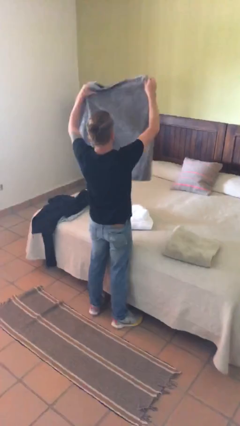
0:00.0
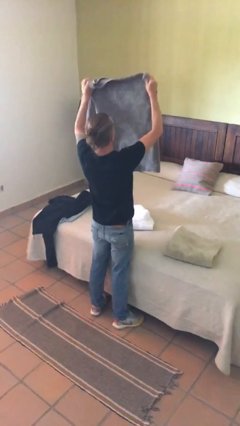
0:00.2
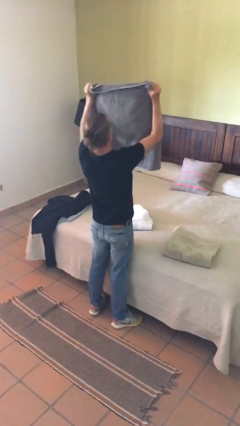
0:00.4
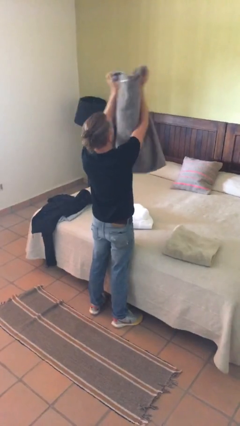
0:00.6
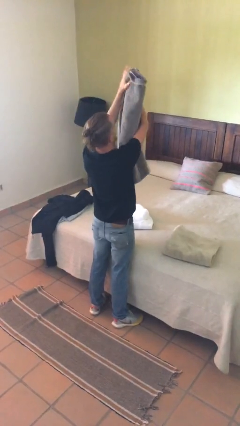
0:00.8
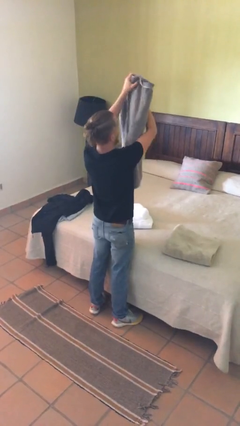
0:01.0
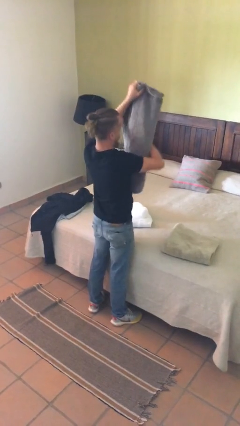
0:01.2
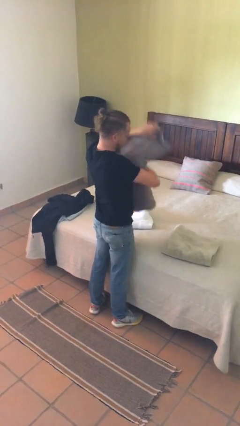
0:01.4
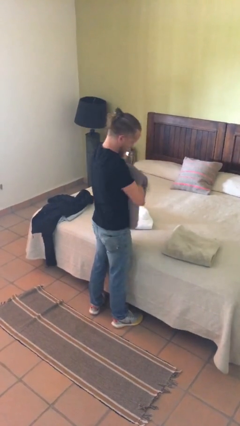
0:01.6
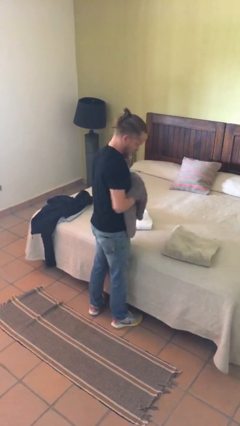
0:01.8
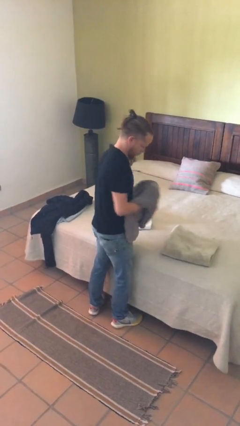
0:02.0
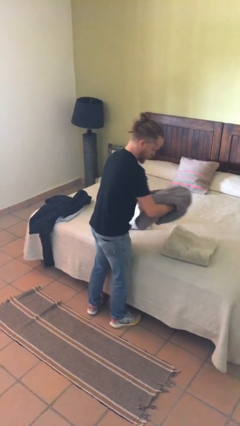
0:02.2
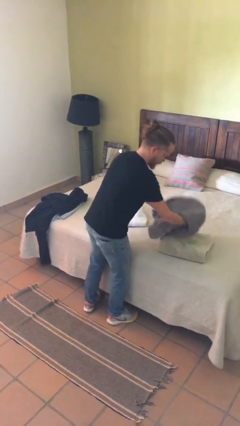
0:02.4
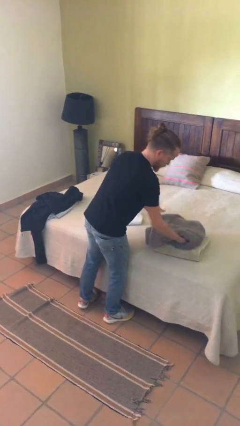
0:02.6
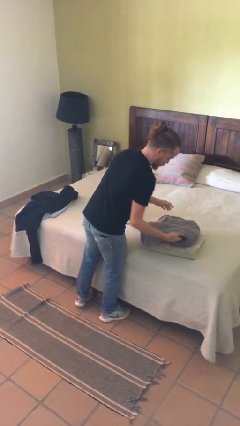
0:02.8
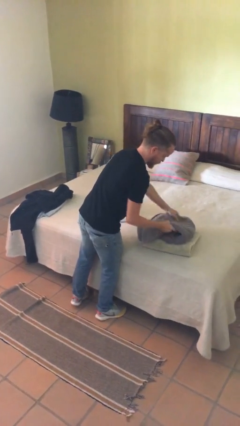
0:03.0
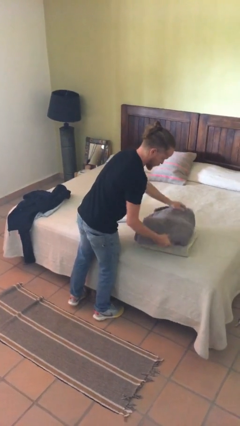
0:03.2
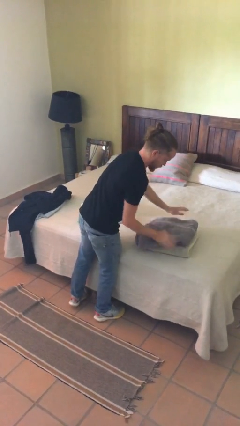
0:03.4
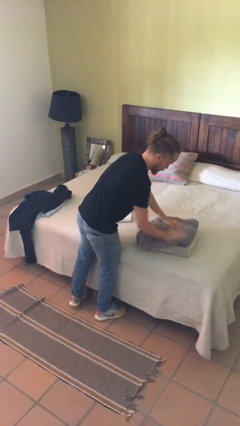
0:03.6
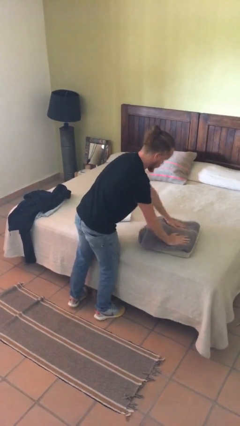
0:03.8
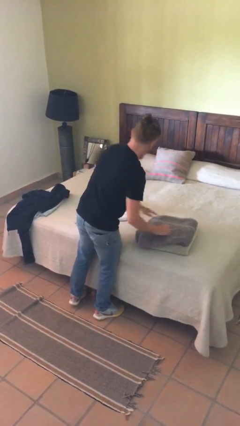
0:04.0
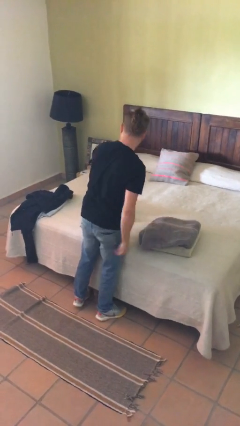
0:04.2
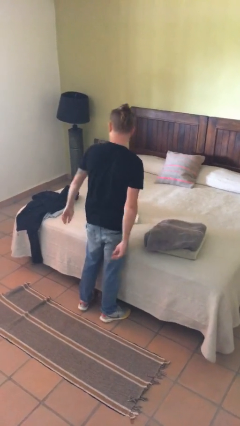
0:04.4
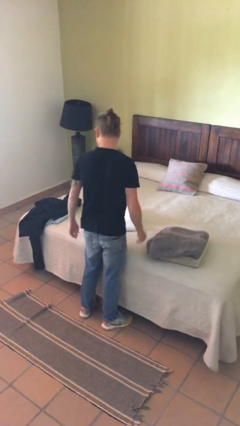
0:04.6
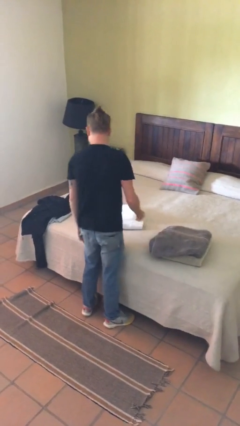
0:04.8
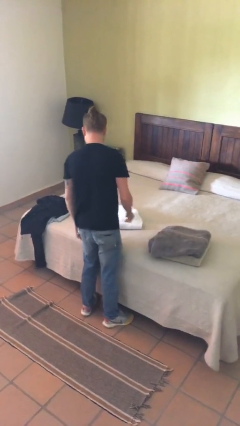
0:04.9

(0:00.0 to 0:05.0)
person folds towel

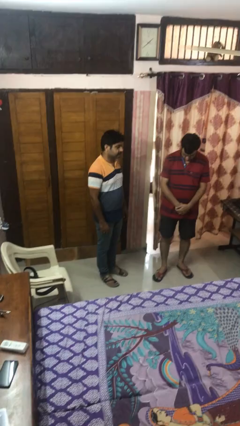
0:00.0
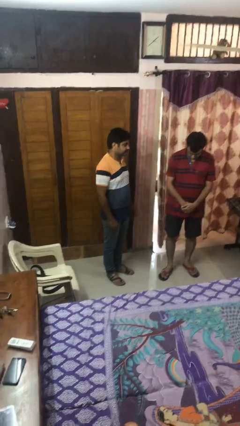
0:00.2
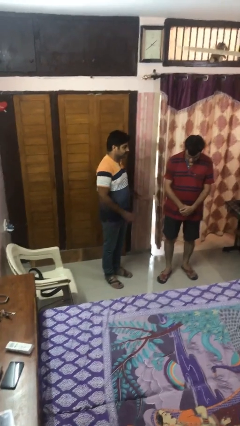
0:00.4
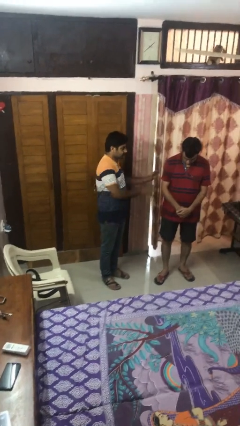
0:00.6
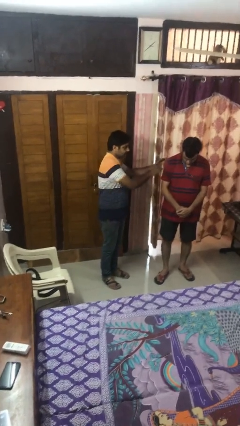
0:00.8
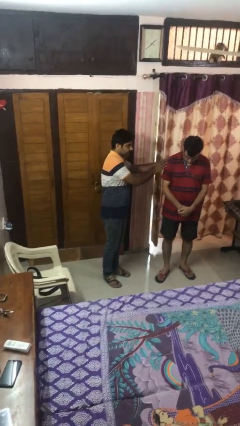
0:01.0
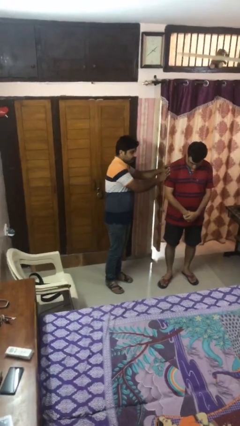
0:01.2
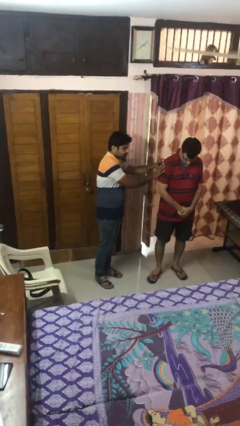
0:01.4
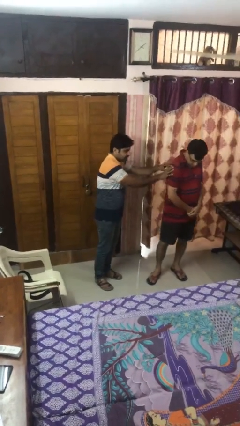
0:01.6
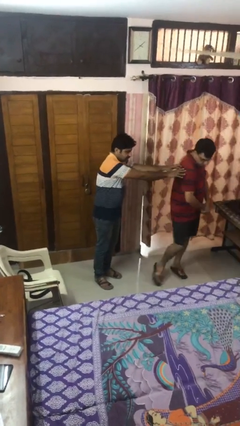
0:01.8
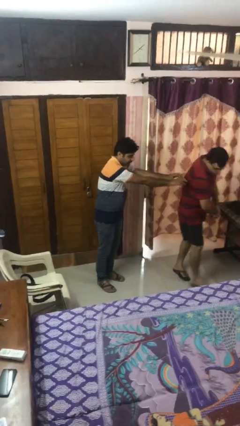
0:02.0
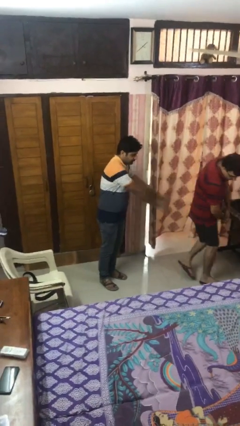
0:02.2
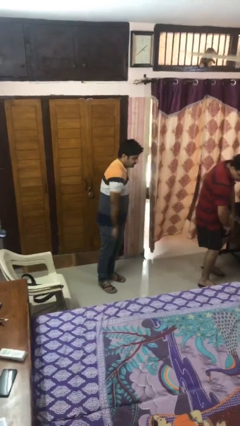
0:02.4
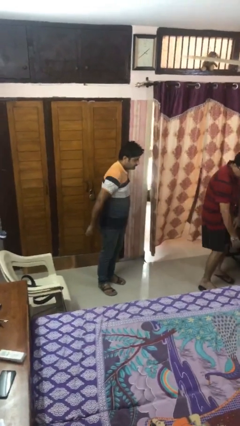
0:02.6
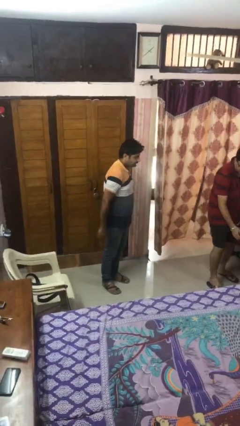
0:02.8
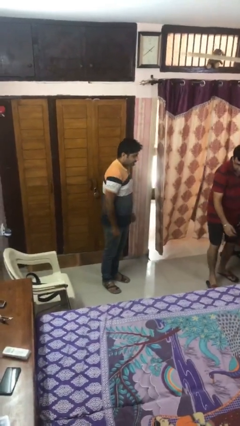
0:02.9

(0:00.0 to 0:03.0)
person shoves person

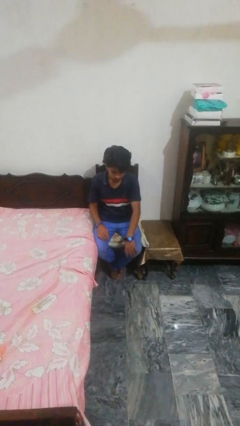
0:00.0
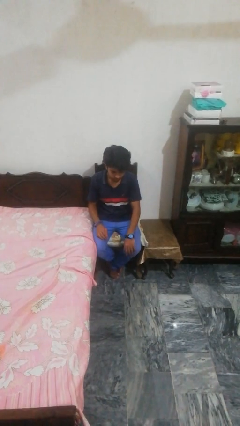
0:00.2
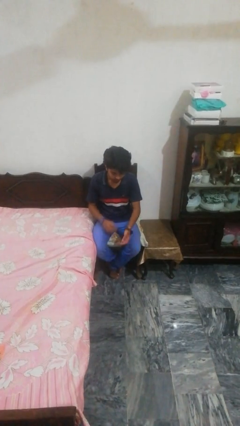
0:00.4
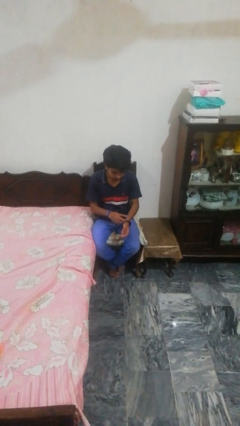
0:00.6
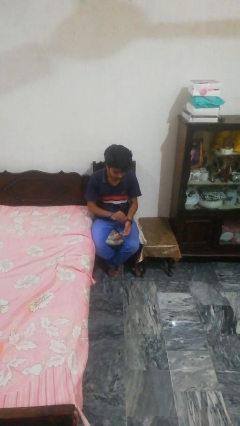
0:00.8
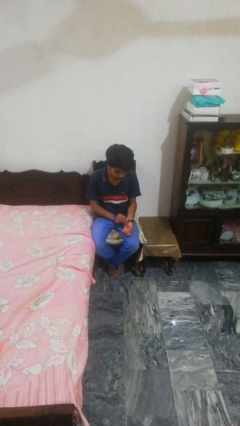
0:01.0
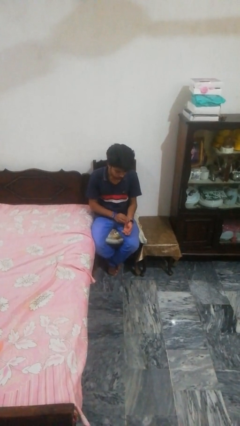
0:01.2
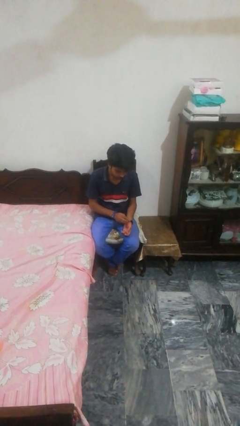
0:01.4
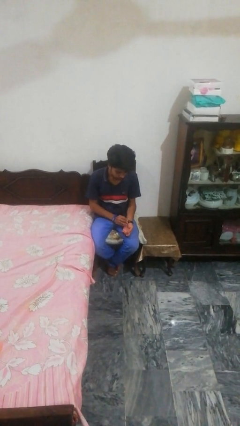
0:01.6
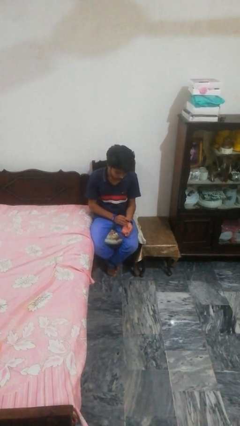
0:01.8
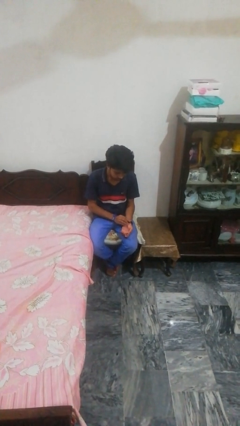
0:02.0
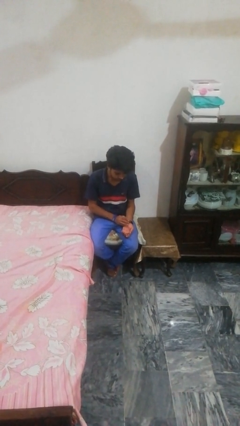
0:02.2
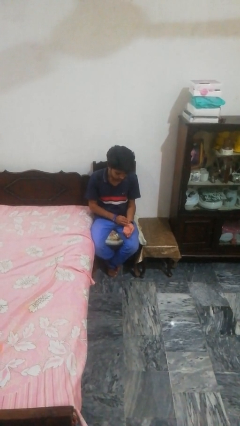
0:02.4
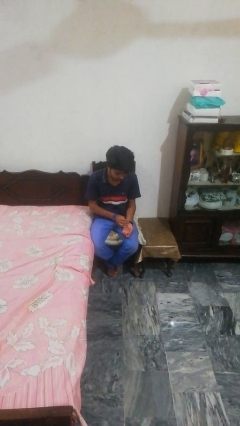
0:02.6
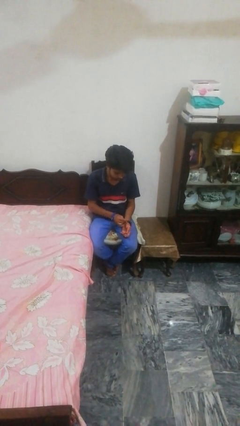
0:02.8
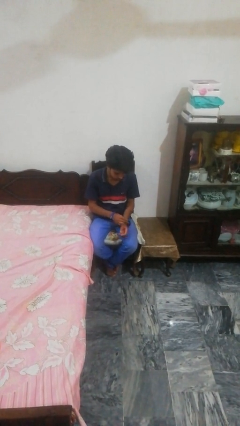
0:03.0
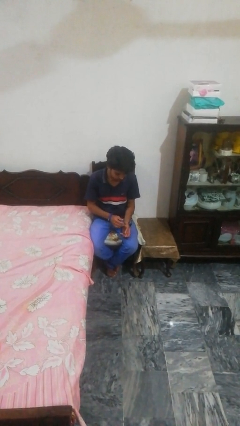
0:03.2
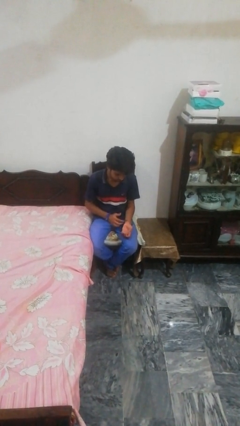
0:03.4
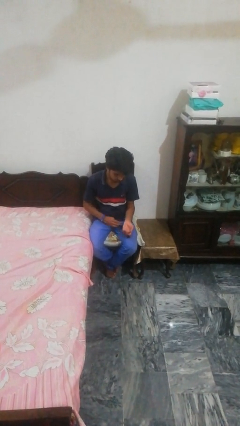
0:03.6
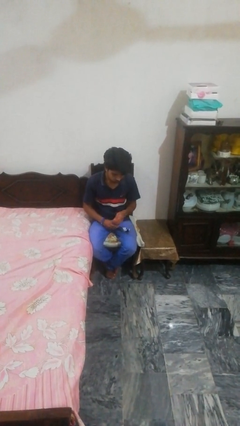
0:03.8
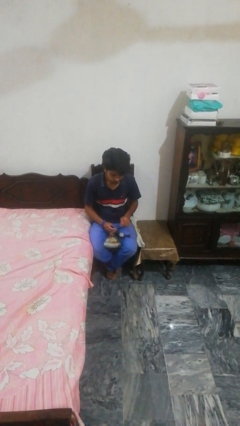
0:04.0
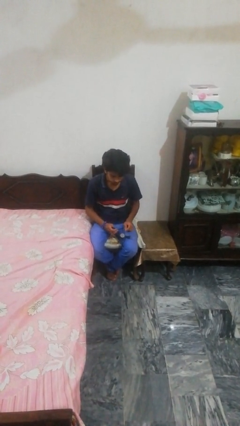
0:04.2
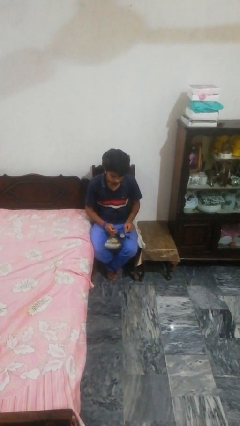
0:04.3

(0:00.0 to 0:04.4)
person takes off wristwatch

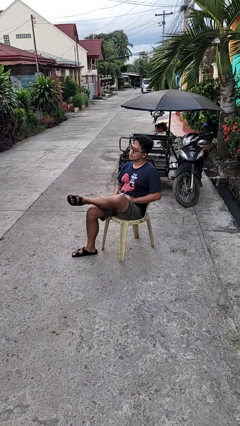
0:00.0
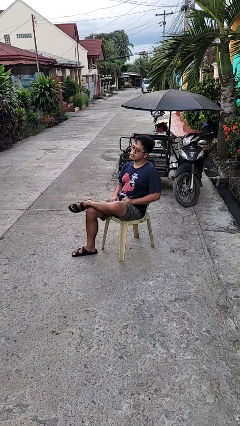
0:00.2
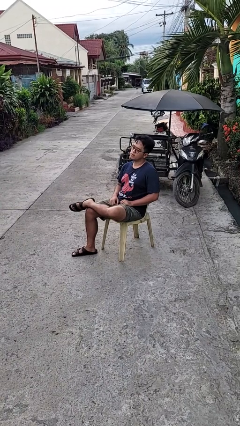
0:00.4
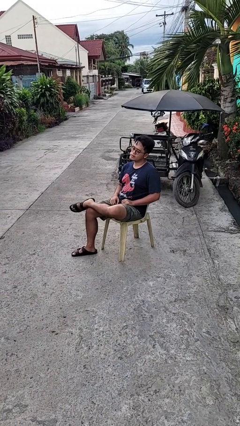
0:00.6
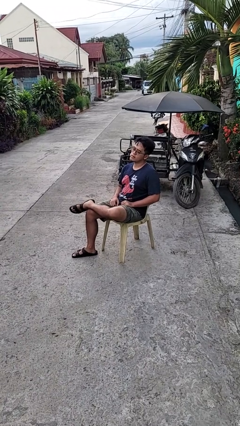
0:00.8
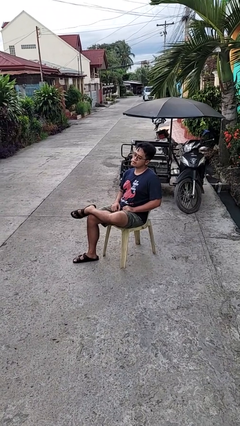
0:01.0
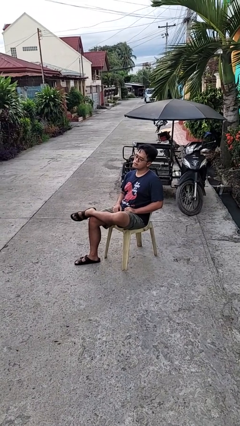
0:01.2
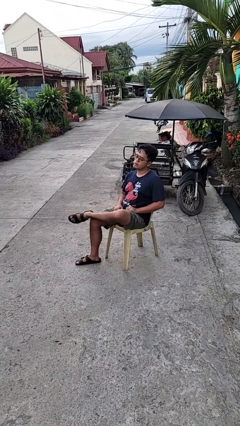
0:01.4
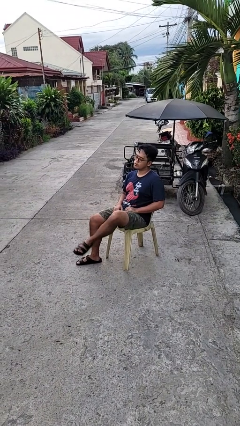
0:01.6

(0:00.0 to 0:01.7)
person crosses legs

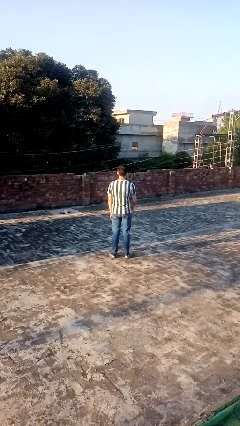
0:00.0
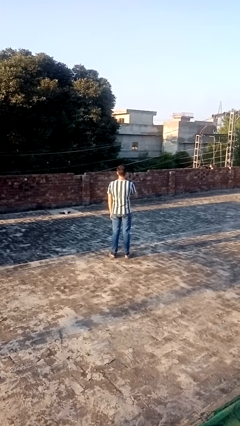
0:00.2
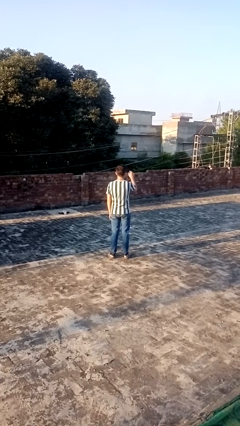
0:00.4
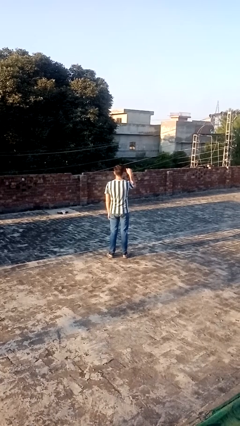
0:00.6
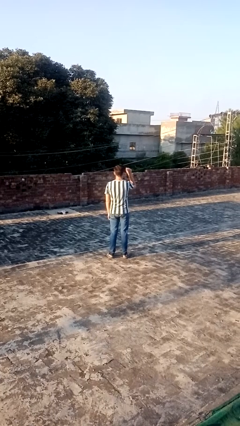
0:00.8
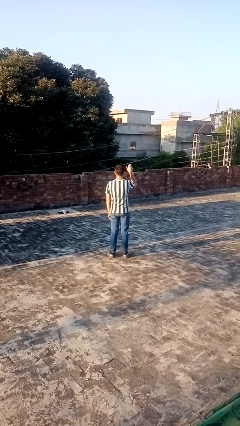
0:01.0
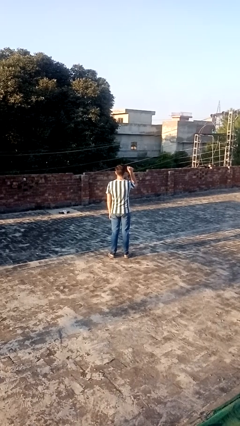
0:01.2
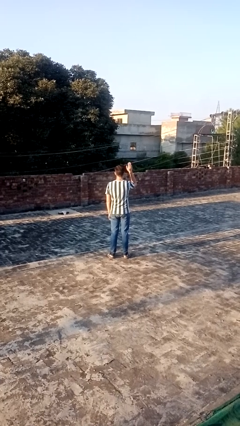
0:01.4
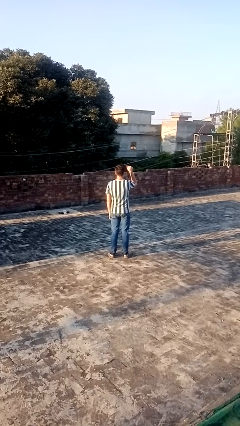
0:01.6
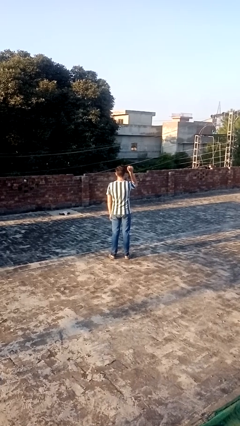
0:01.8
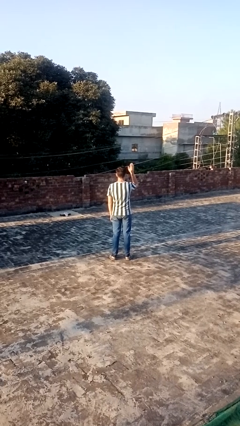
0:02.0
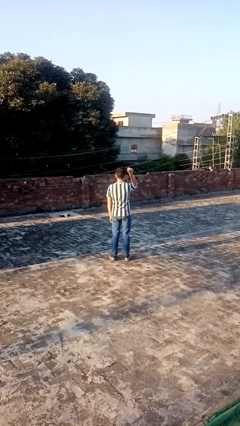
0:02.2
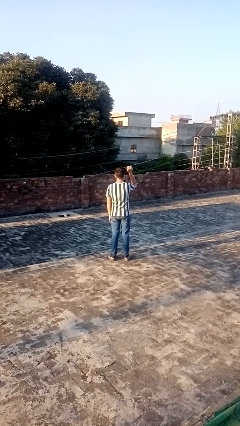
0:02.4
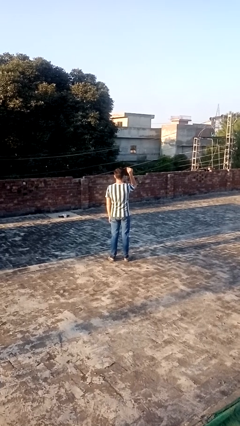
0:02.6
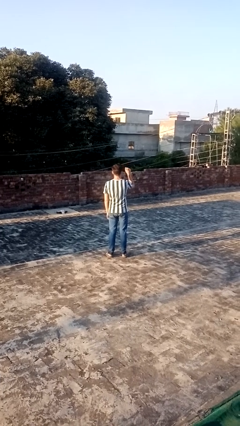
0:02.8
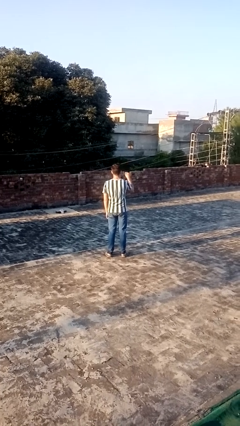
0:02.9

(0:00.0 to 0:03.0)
person gestures come here

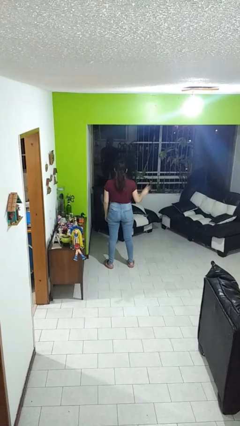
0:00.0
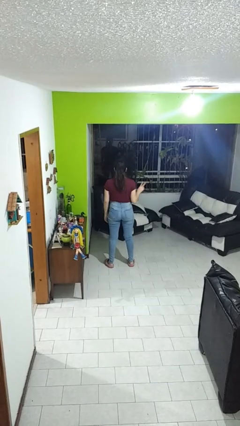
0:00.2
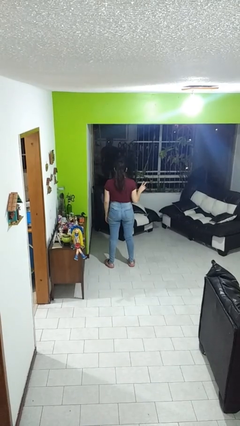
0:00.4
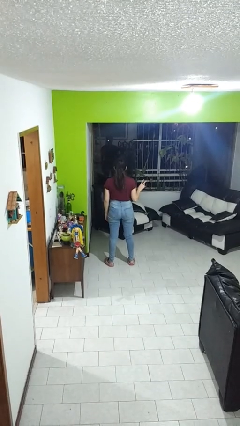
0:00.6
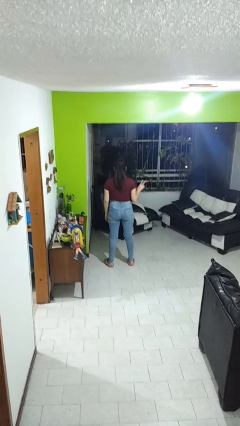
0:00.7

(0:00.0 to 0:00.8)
person gestures peace
